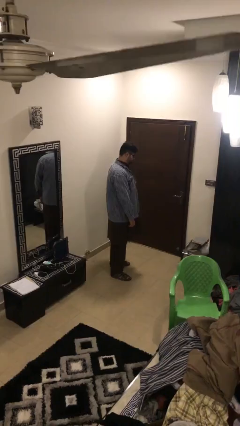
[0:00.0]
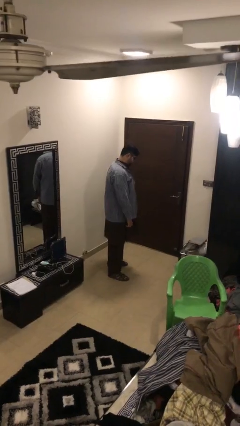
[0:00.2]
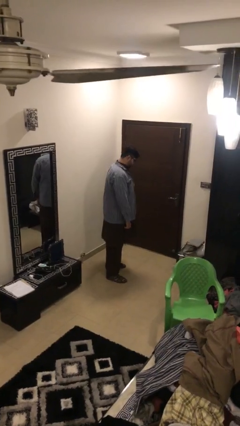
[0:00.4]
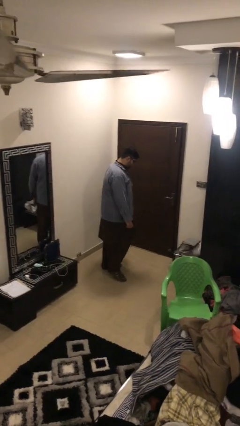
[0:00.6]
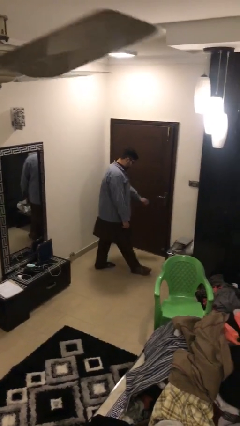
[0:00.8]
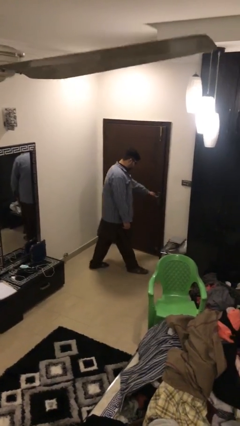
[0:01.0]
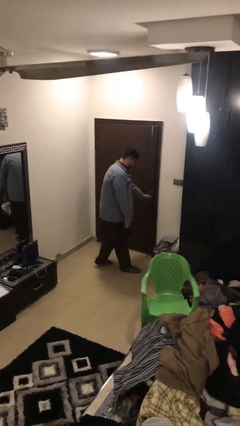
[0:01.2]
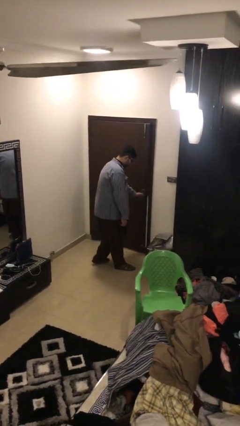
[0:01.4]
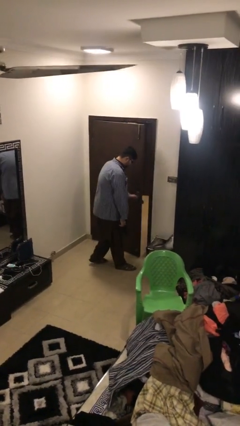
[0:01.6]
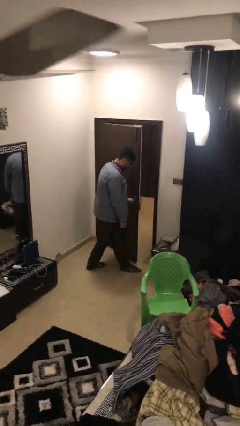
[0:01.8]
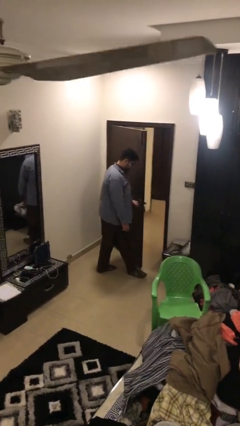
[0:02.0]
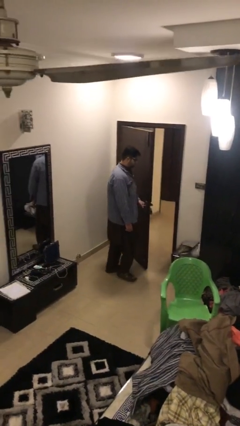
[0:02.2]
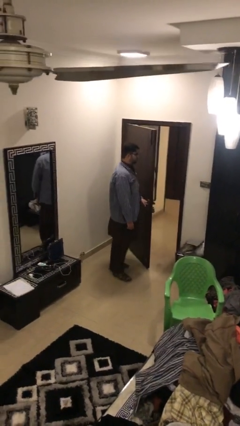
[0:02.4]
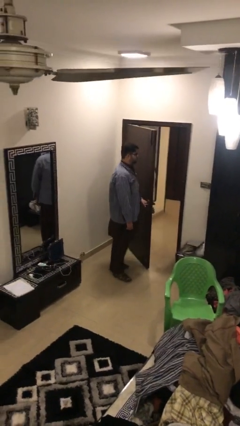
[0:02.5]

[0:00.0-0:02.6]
person opens facility door

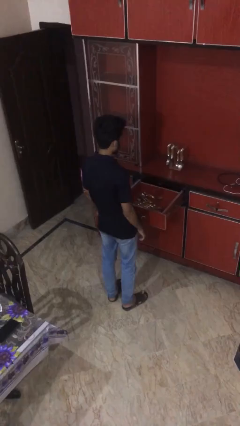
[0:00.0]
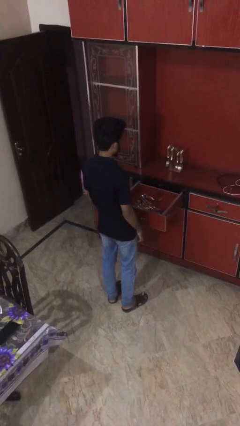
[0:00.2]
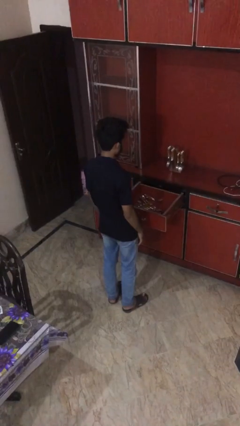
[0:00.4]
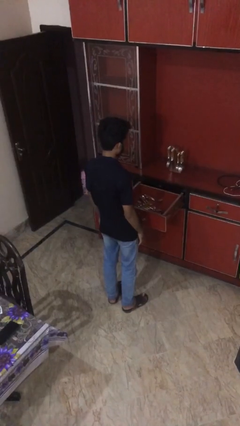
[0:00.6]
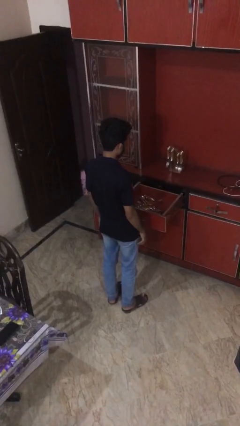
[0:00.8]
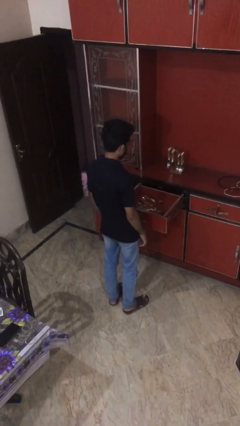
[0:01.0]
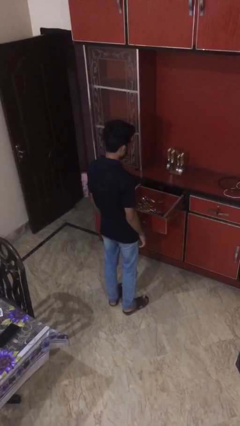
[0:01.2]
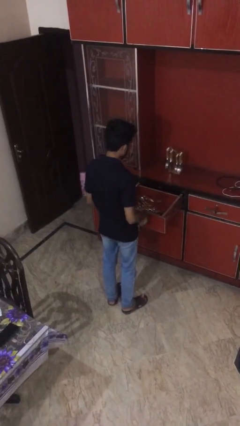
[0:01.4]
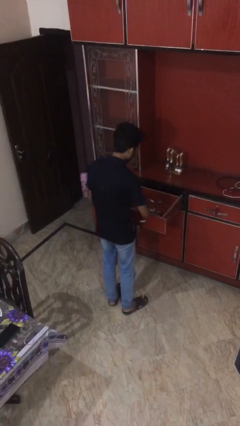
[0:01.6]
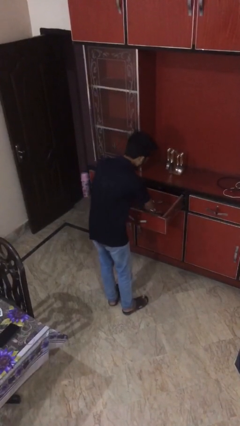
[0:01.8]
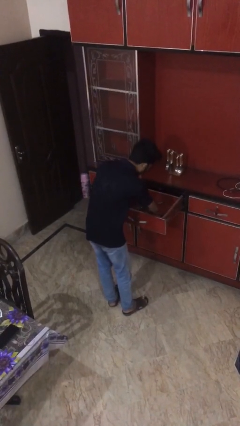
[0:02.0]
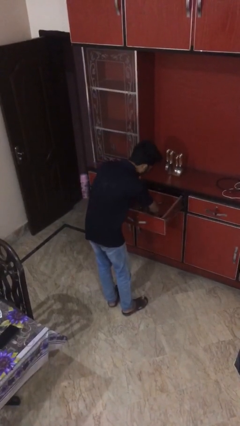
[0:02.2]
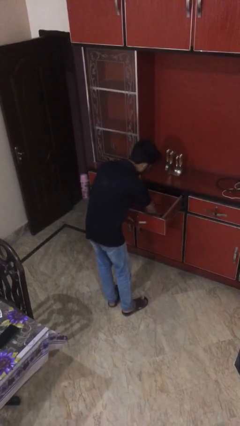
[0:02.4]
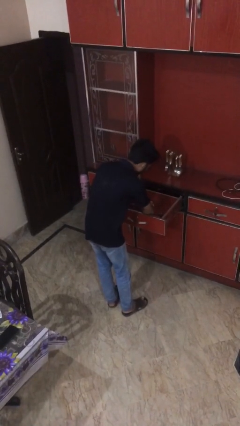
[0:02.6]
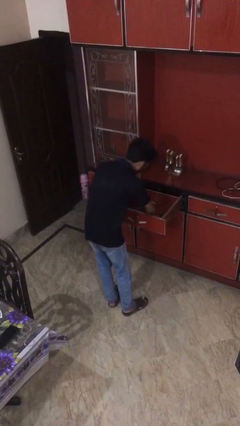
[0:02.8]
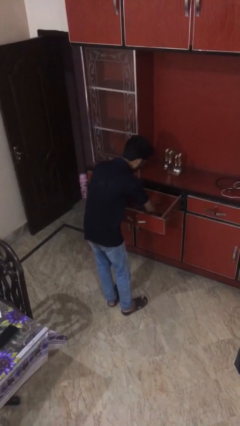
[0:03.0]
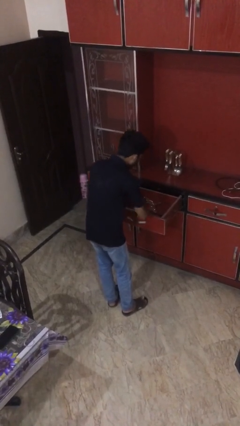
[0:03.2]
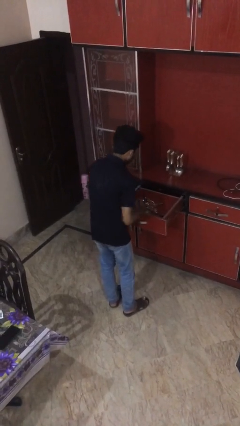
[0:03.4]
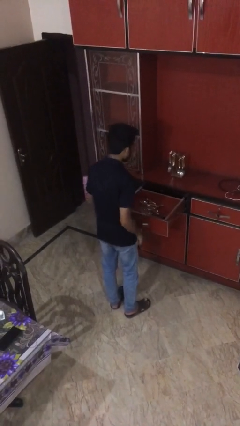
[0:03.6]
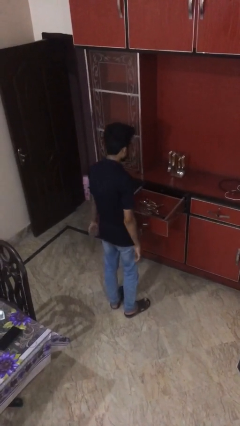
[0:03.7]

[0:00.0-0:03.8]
person searches in kitchen drawer

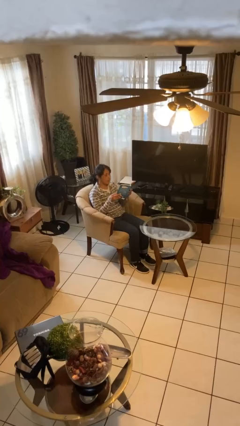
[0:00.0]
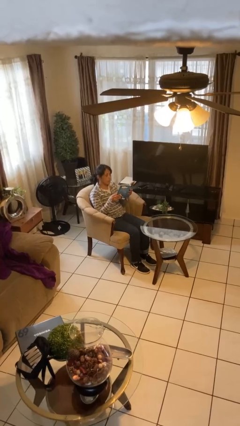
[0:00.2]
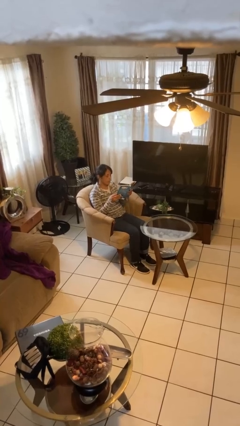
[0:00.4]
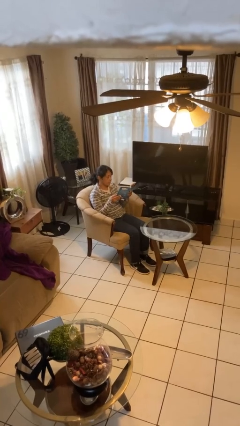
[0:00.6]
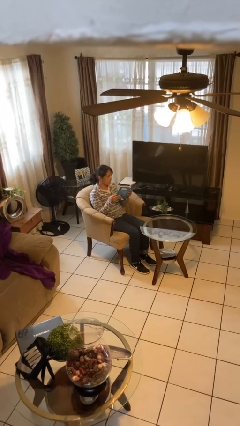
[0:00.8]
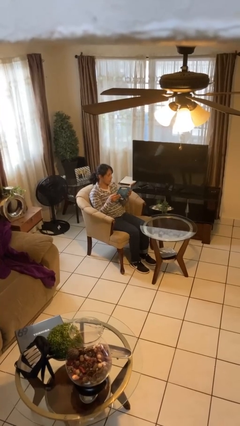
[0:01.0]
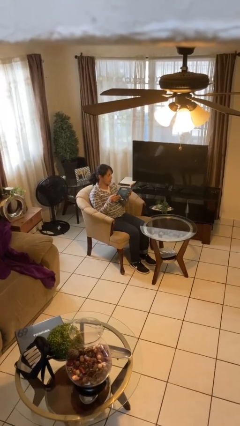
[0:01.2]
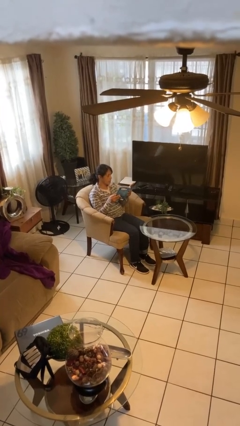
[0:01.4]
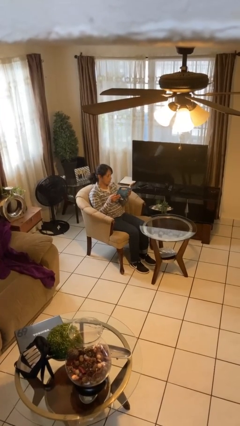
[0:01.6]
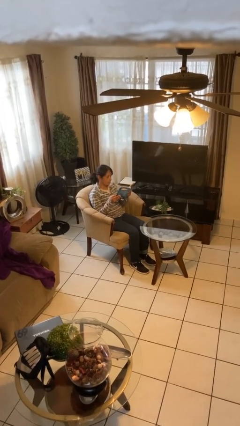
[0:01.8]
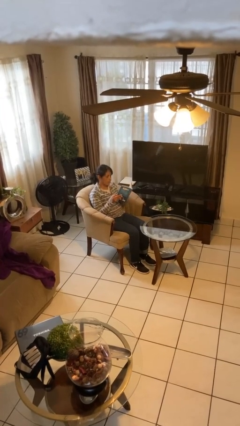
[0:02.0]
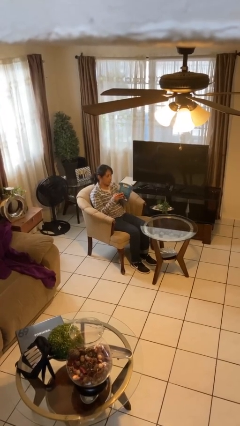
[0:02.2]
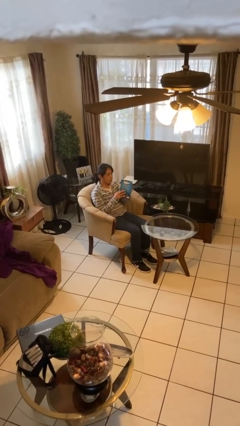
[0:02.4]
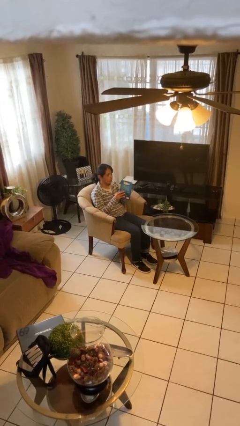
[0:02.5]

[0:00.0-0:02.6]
person reads document

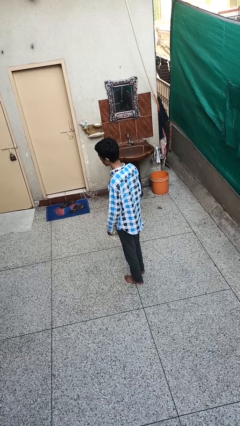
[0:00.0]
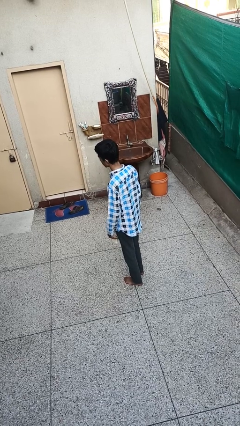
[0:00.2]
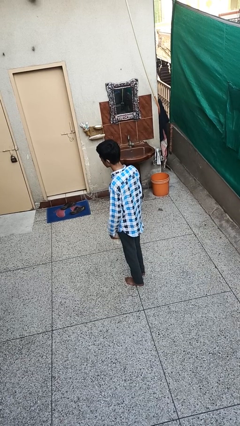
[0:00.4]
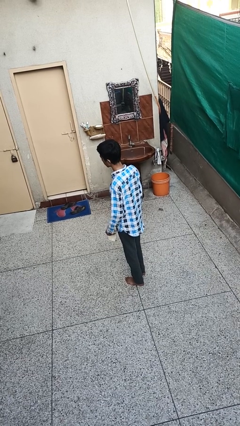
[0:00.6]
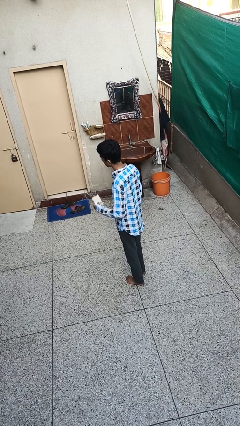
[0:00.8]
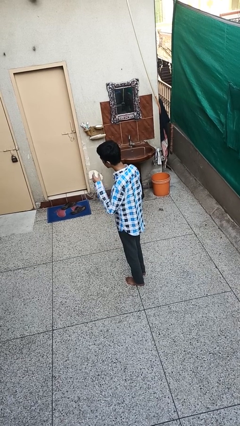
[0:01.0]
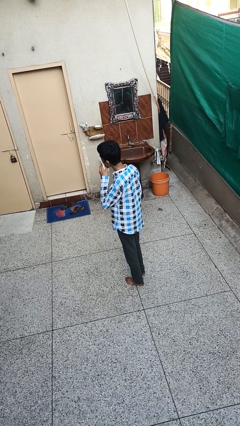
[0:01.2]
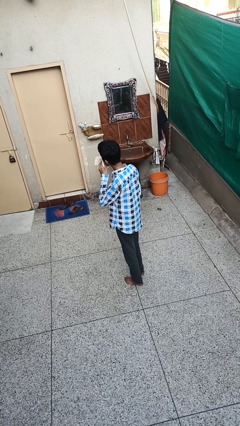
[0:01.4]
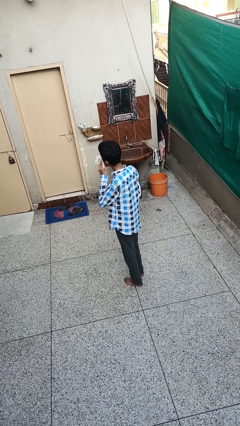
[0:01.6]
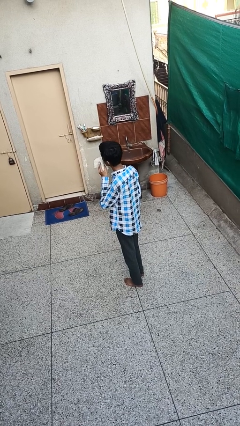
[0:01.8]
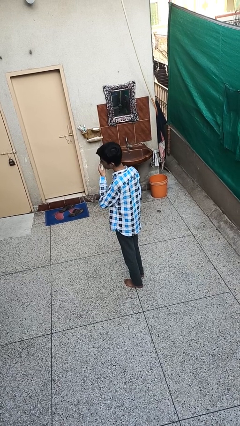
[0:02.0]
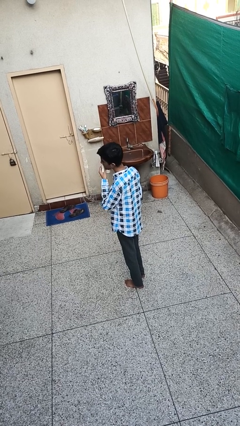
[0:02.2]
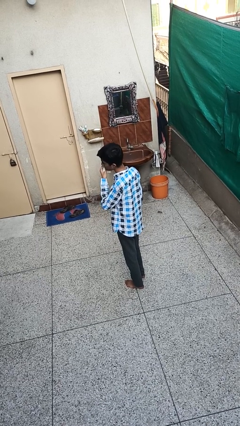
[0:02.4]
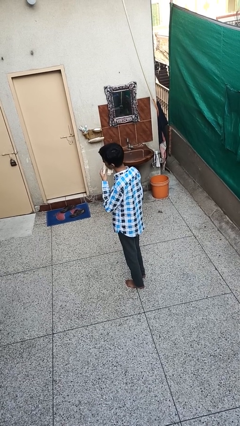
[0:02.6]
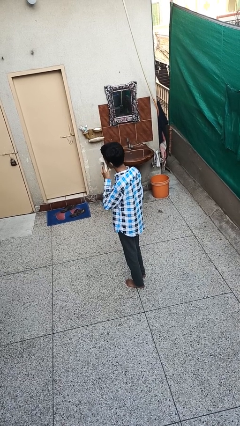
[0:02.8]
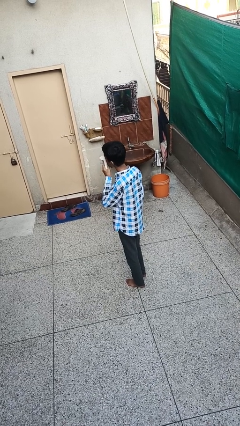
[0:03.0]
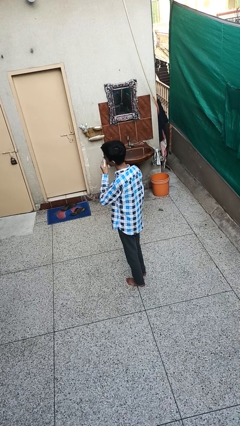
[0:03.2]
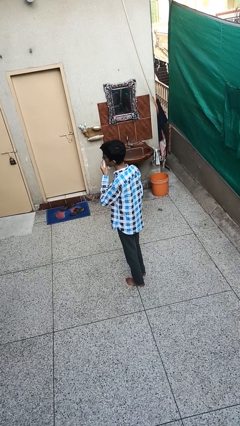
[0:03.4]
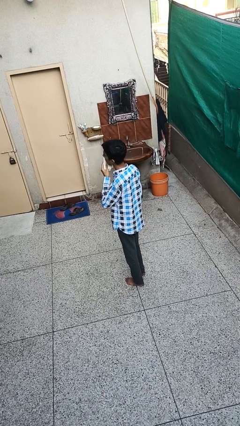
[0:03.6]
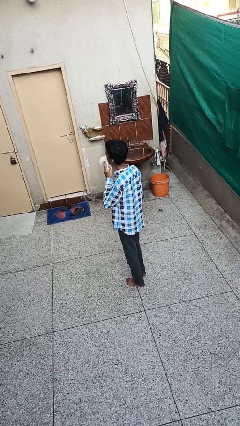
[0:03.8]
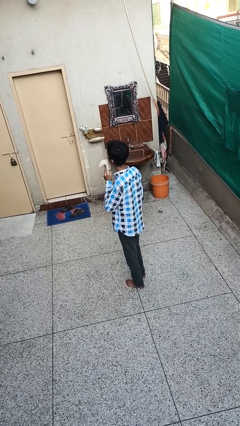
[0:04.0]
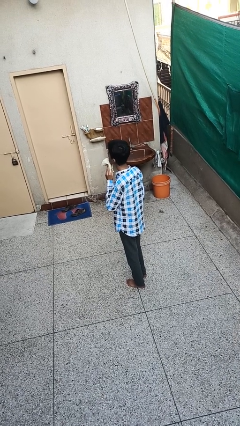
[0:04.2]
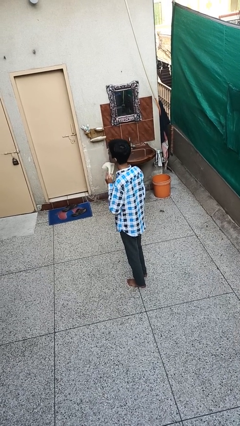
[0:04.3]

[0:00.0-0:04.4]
person wipes mouth with napkin

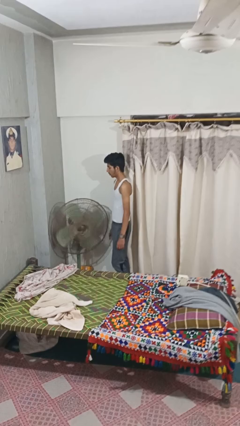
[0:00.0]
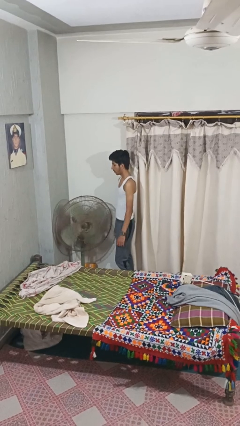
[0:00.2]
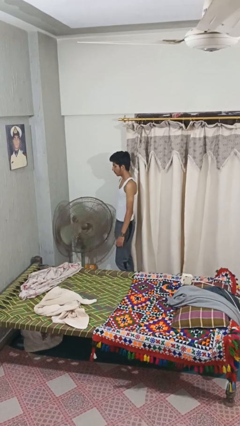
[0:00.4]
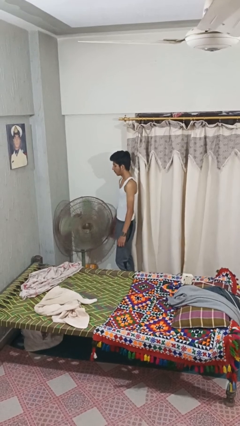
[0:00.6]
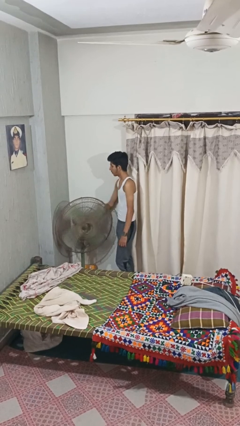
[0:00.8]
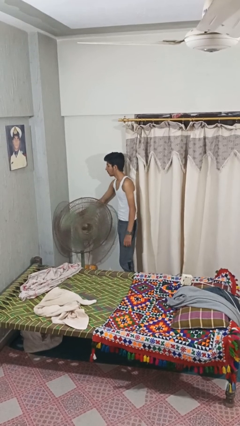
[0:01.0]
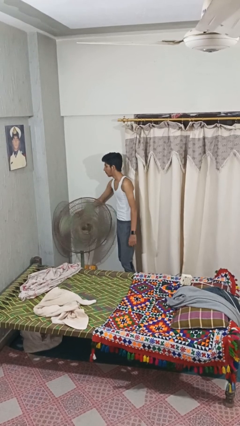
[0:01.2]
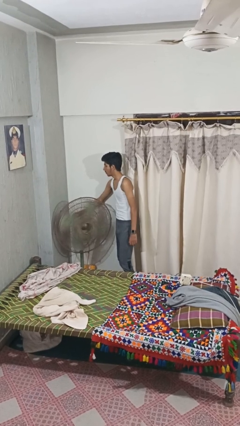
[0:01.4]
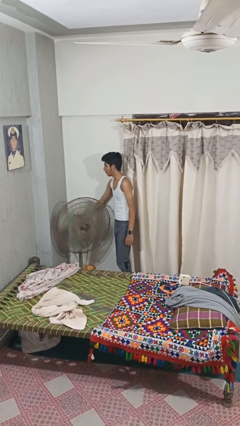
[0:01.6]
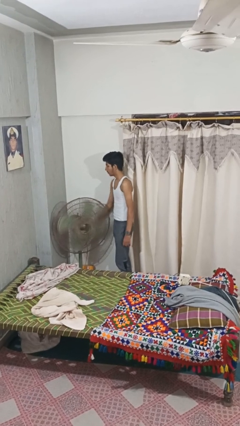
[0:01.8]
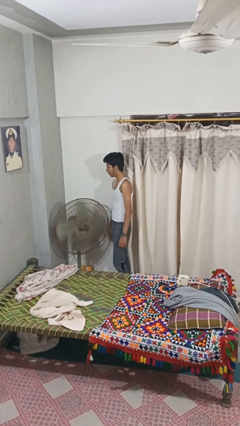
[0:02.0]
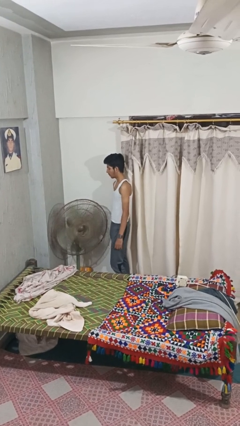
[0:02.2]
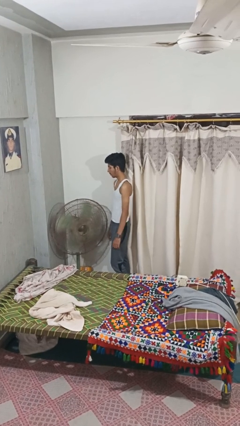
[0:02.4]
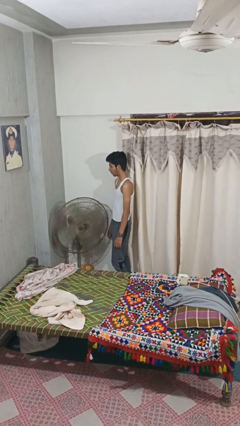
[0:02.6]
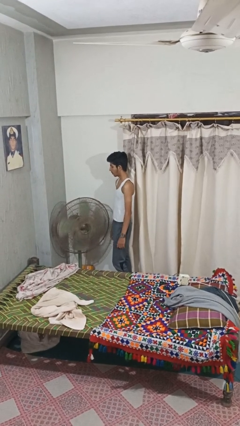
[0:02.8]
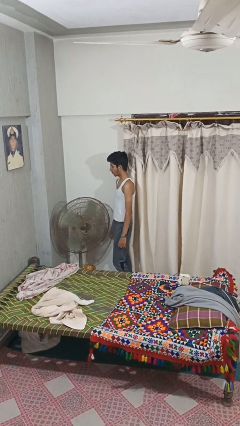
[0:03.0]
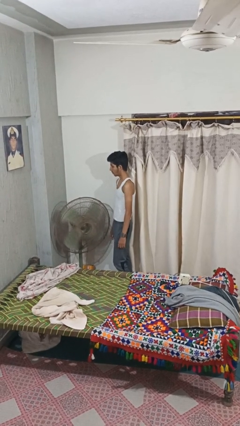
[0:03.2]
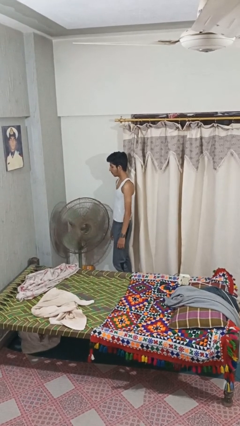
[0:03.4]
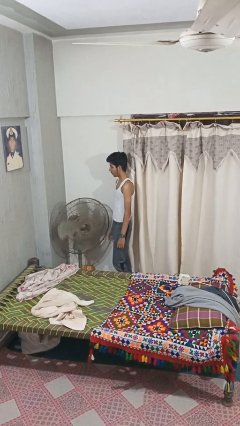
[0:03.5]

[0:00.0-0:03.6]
person turns off fan

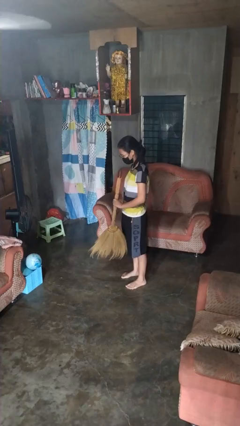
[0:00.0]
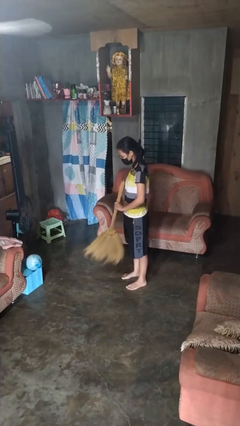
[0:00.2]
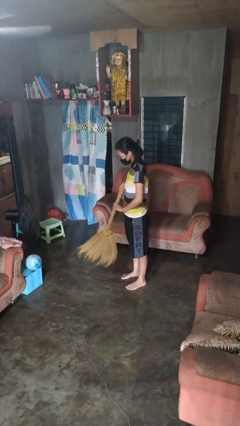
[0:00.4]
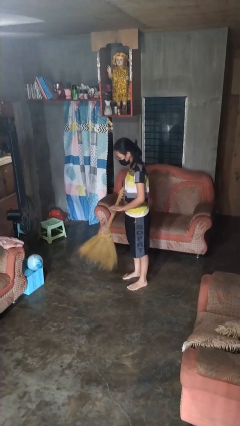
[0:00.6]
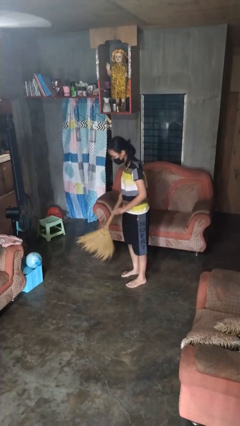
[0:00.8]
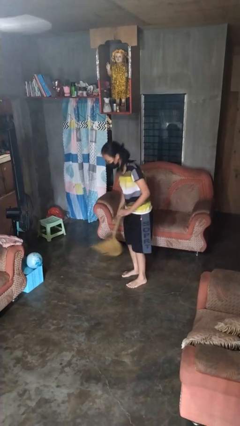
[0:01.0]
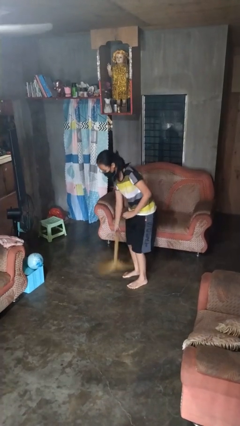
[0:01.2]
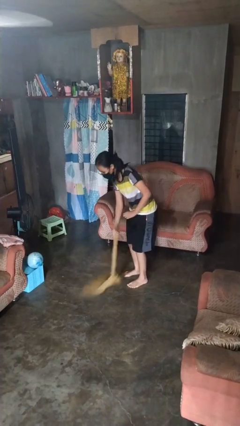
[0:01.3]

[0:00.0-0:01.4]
person sweeps floor
